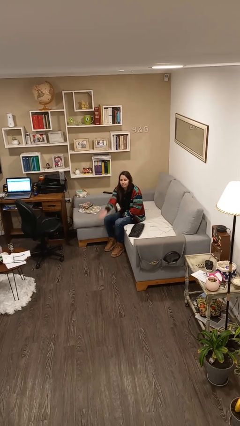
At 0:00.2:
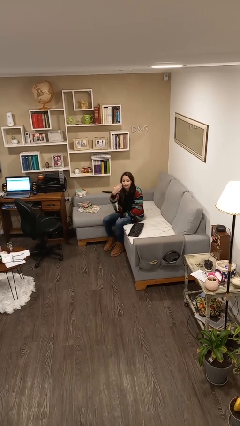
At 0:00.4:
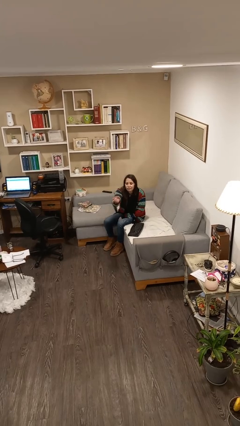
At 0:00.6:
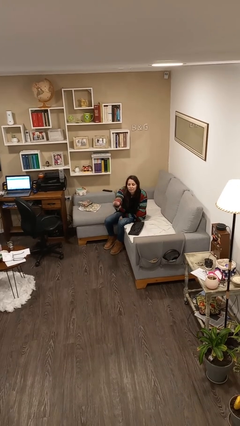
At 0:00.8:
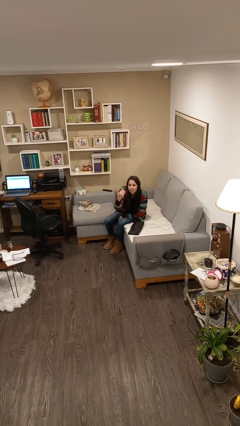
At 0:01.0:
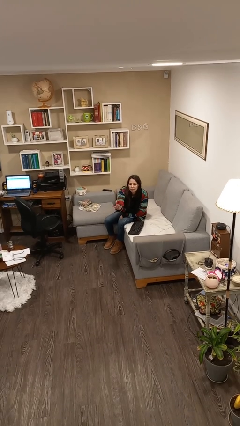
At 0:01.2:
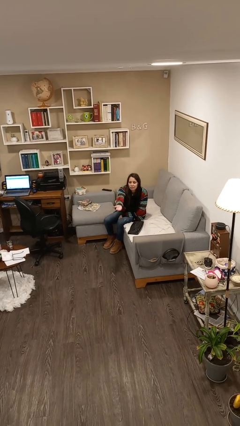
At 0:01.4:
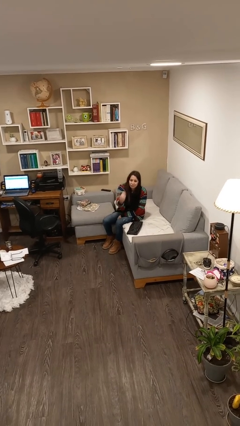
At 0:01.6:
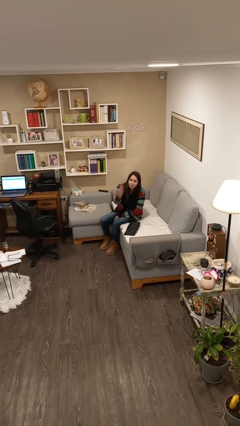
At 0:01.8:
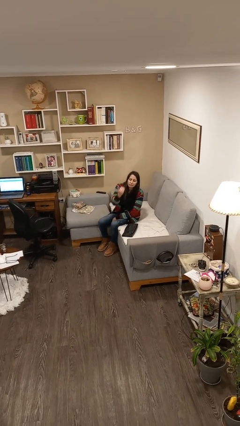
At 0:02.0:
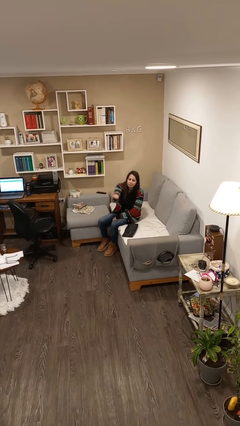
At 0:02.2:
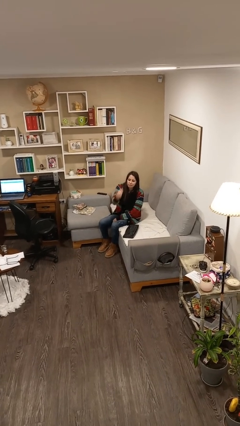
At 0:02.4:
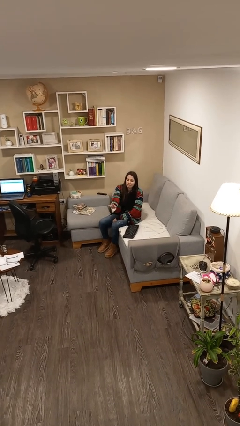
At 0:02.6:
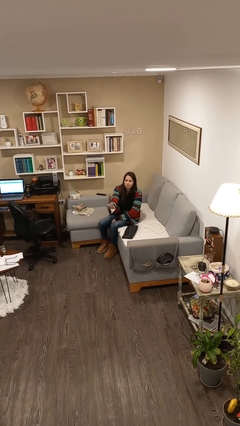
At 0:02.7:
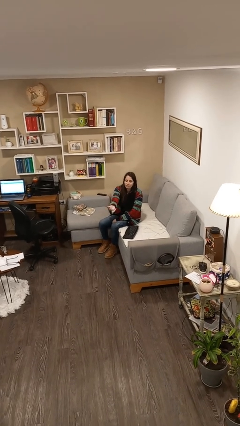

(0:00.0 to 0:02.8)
person gestures come here

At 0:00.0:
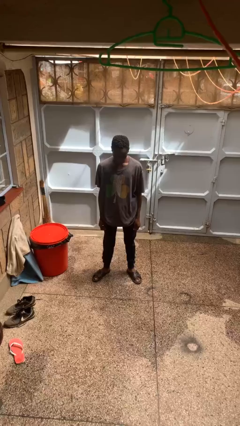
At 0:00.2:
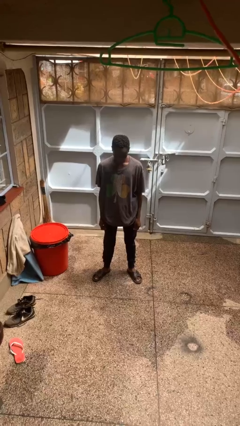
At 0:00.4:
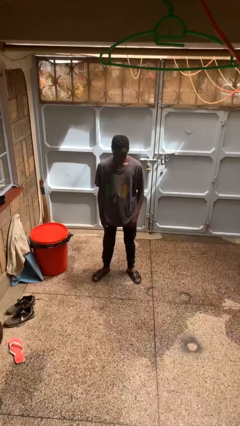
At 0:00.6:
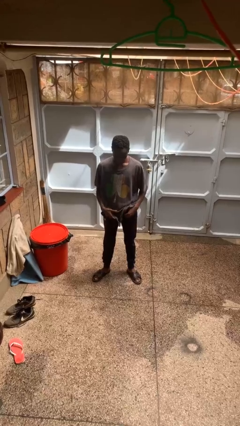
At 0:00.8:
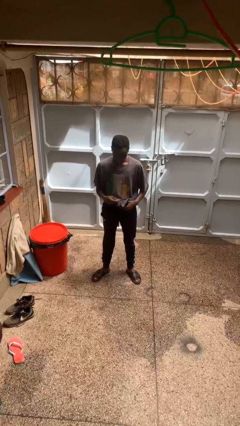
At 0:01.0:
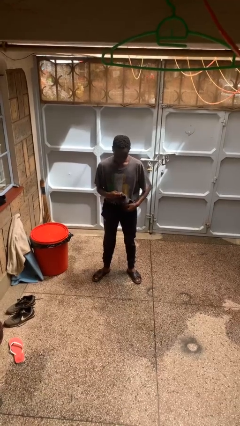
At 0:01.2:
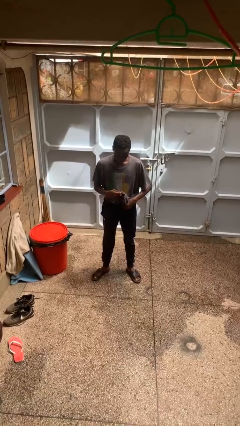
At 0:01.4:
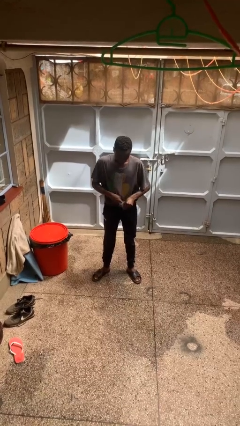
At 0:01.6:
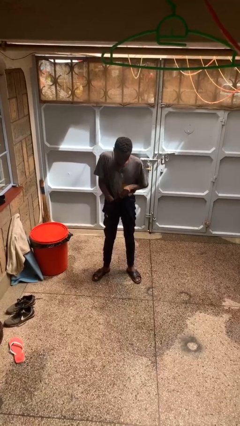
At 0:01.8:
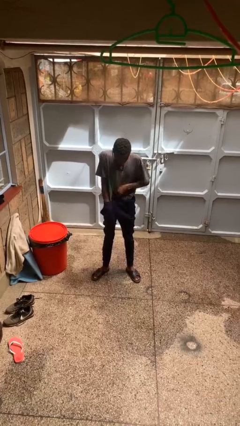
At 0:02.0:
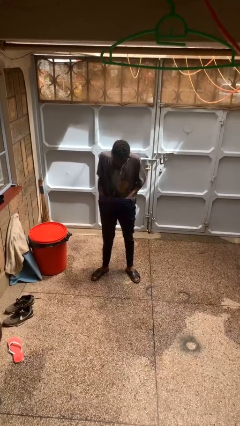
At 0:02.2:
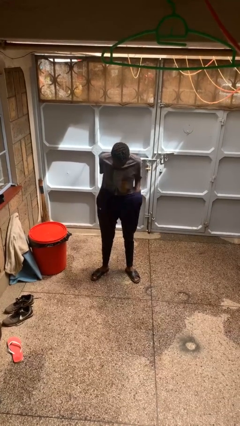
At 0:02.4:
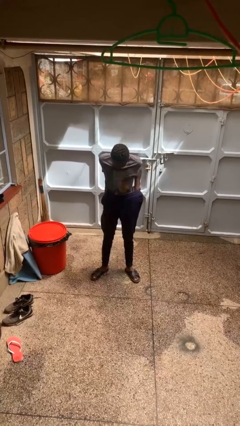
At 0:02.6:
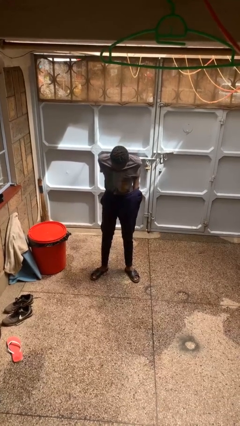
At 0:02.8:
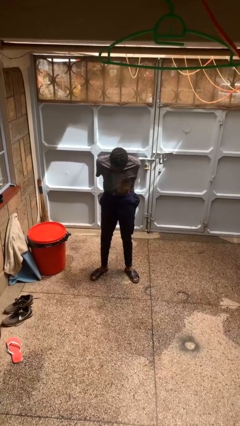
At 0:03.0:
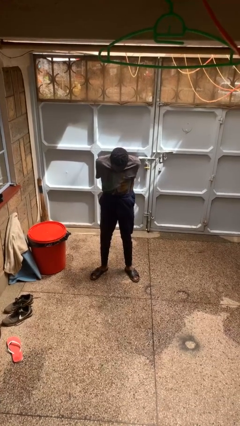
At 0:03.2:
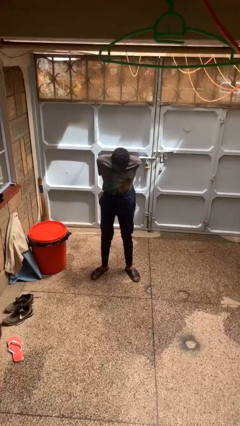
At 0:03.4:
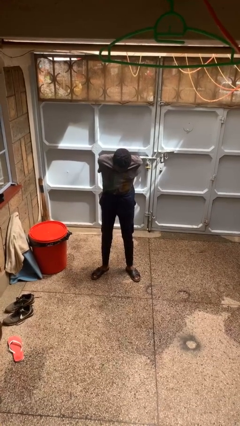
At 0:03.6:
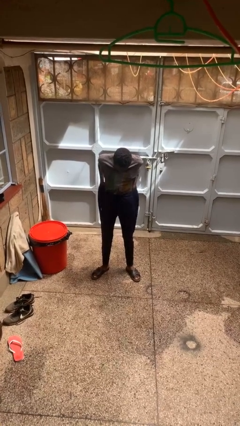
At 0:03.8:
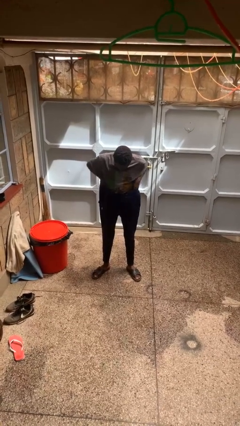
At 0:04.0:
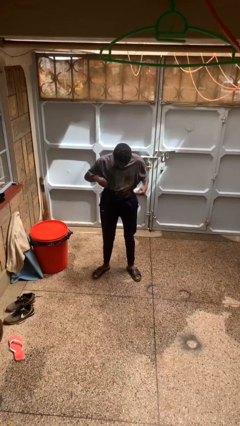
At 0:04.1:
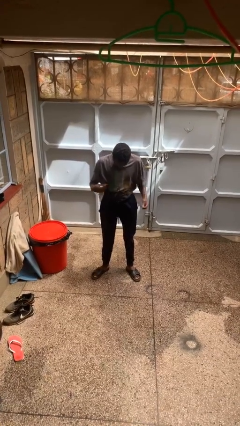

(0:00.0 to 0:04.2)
person tucks in shirt

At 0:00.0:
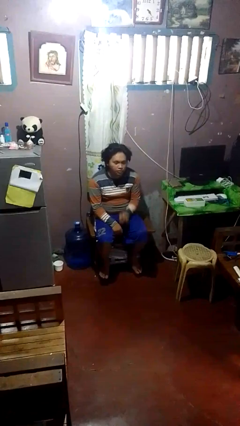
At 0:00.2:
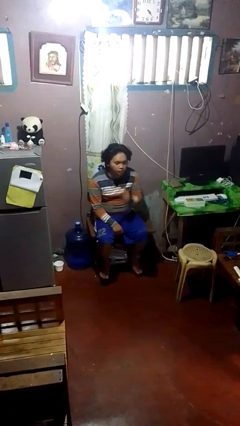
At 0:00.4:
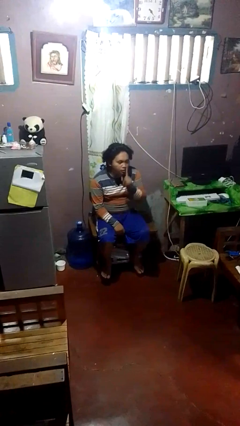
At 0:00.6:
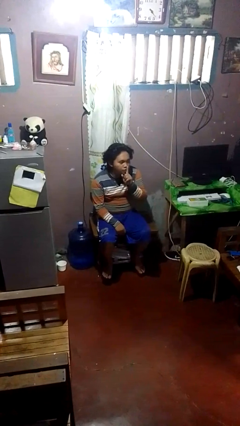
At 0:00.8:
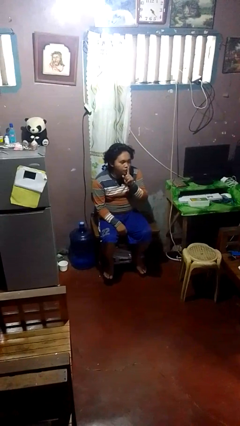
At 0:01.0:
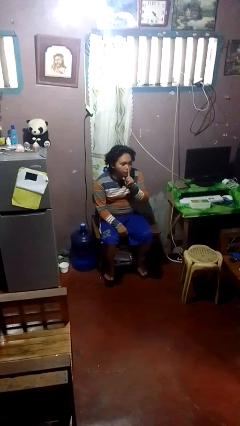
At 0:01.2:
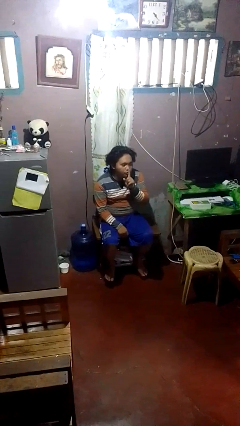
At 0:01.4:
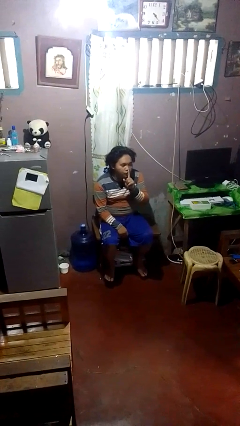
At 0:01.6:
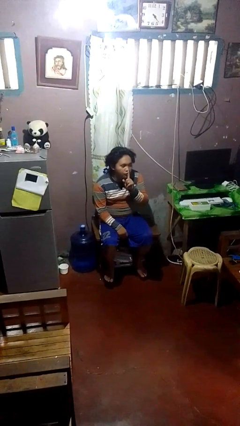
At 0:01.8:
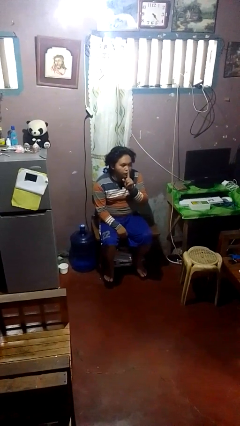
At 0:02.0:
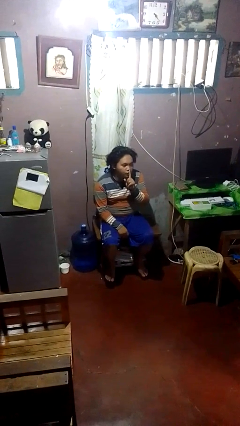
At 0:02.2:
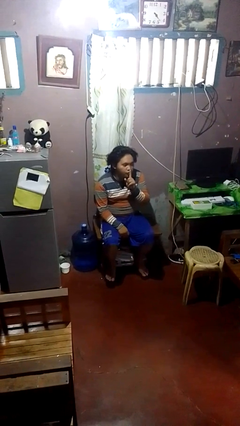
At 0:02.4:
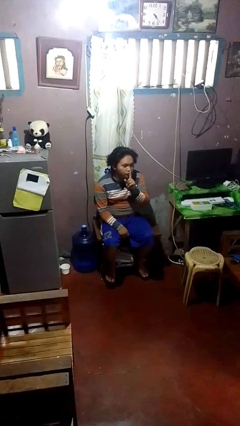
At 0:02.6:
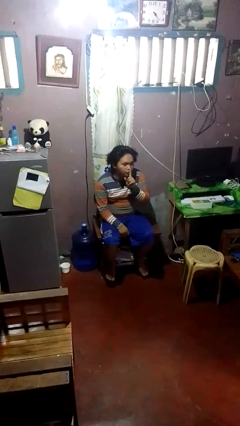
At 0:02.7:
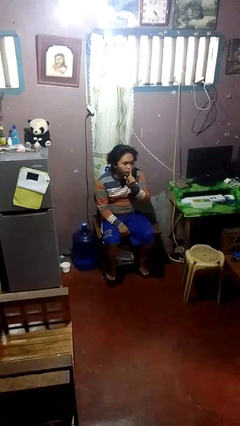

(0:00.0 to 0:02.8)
person gestures be quiet

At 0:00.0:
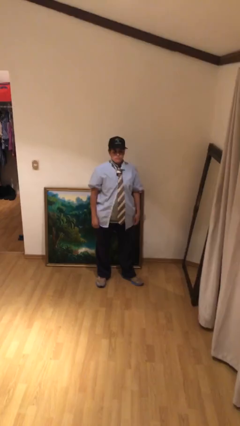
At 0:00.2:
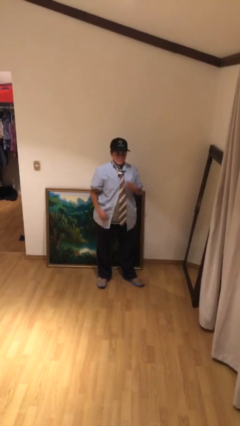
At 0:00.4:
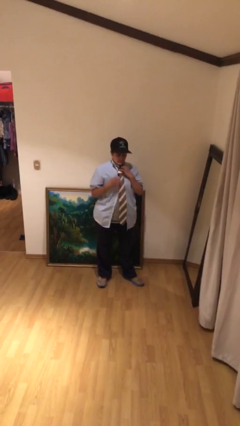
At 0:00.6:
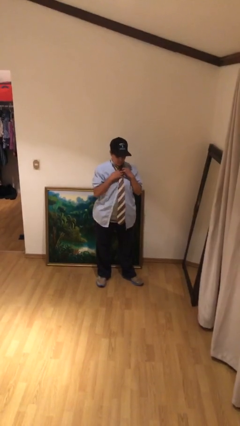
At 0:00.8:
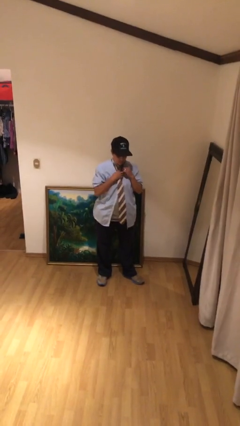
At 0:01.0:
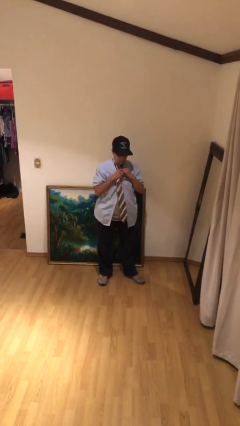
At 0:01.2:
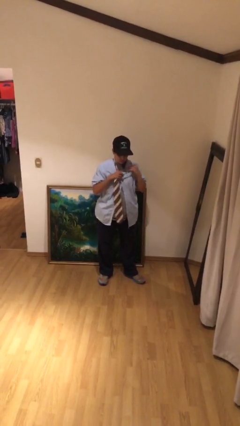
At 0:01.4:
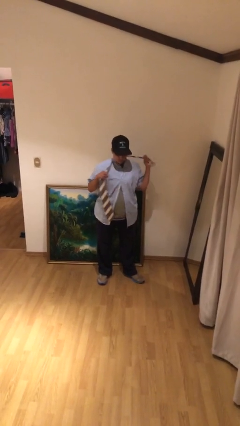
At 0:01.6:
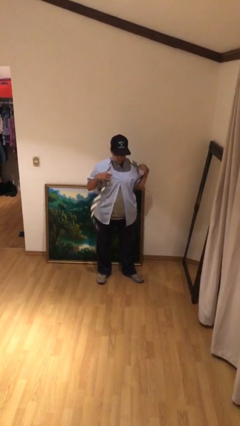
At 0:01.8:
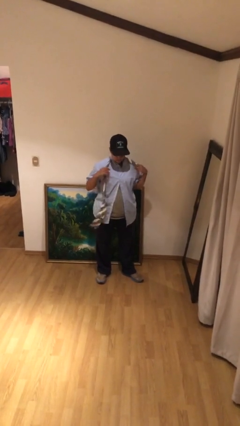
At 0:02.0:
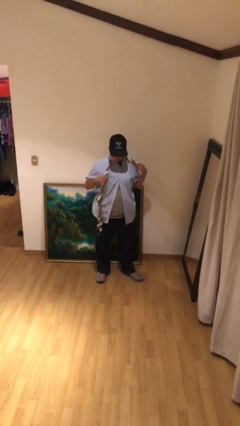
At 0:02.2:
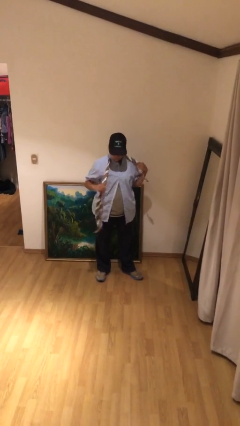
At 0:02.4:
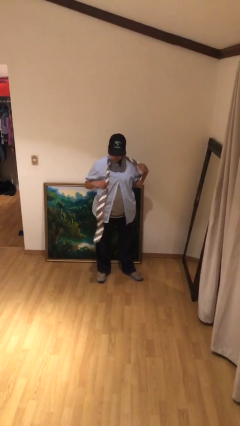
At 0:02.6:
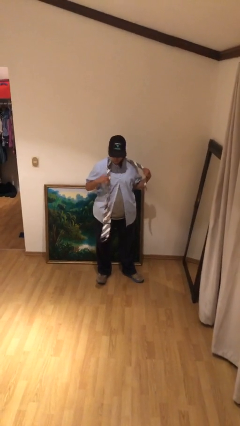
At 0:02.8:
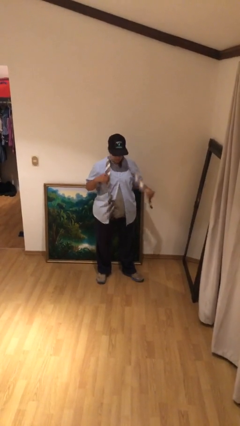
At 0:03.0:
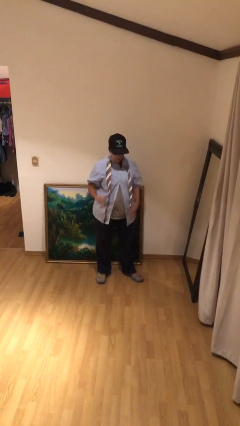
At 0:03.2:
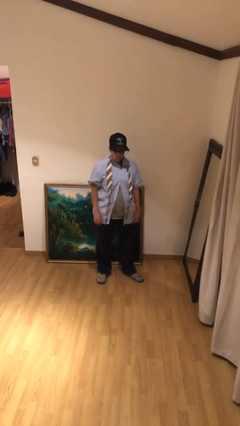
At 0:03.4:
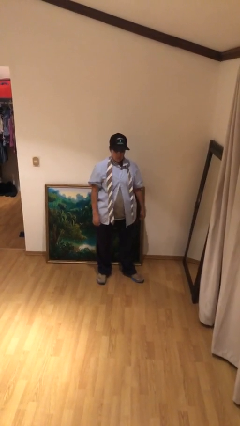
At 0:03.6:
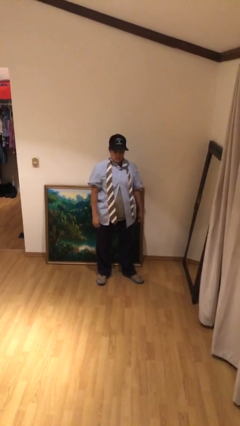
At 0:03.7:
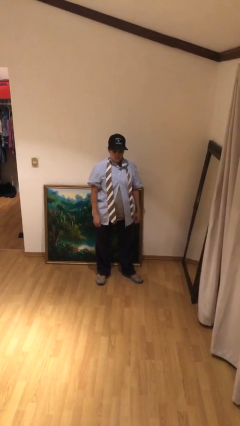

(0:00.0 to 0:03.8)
person takes off necktie

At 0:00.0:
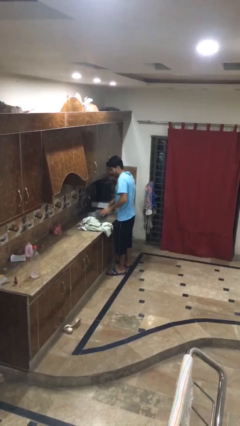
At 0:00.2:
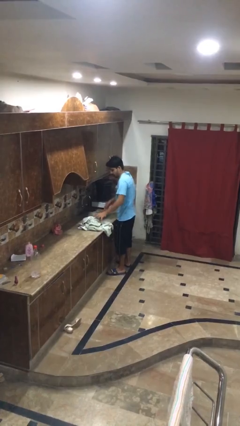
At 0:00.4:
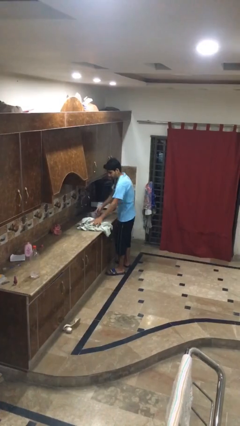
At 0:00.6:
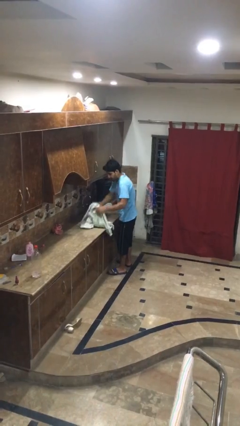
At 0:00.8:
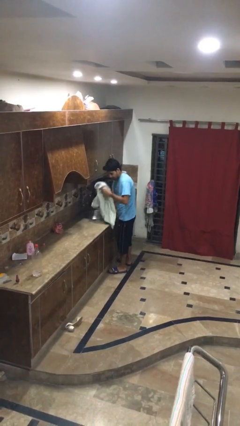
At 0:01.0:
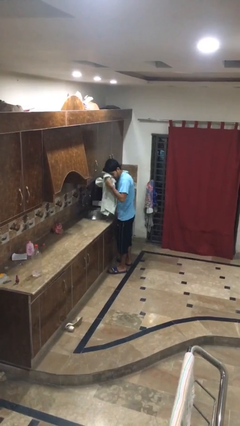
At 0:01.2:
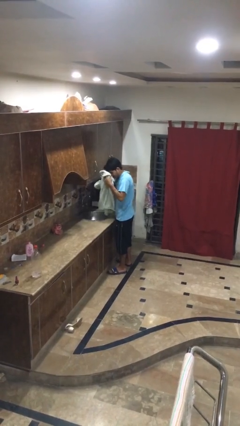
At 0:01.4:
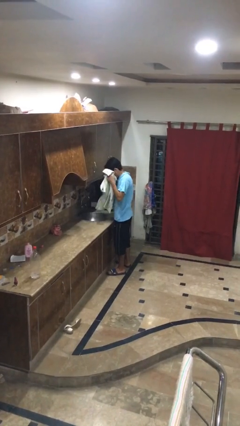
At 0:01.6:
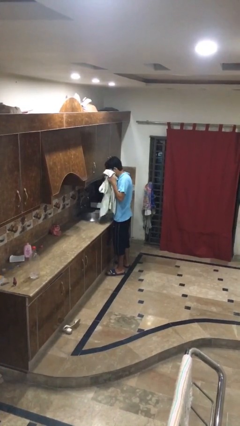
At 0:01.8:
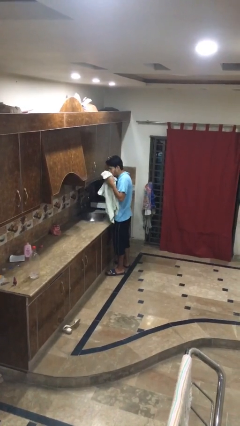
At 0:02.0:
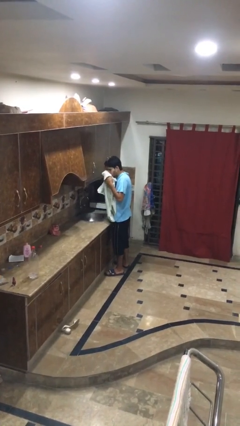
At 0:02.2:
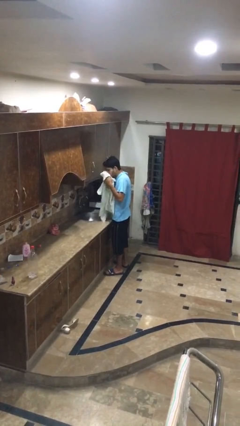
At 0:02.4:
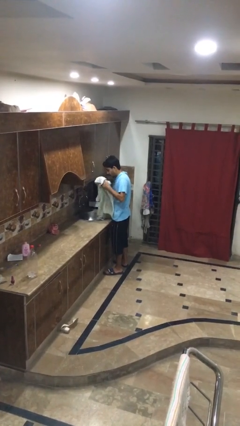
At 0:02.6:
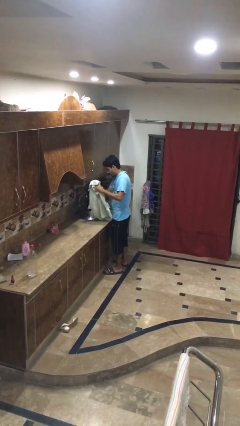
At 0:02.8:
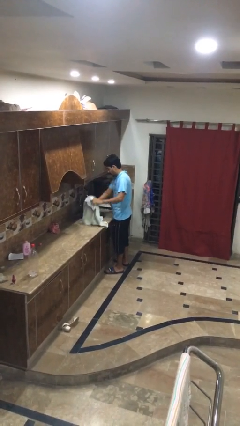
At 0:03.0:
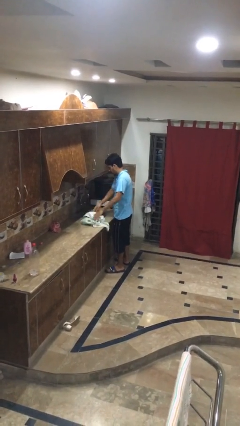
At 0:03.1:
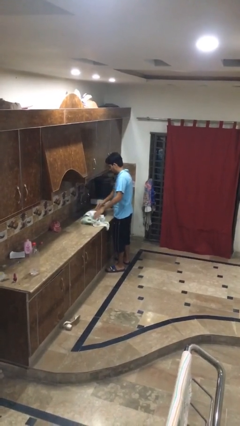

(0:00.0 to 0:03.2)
person dries face with towel

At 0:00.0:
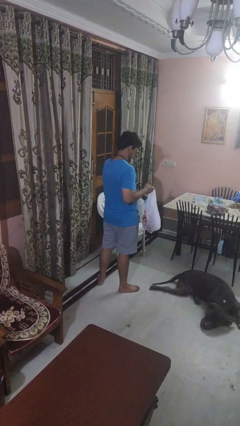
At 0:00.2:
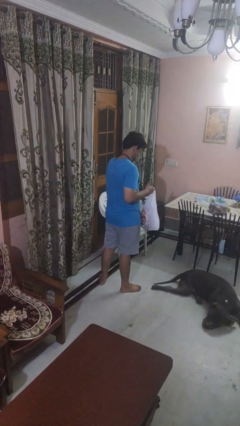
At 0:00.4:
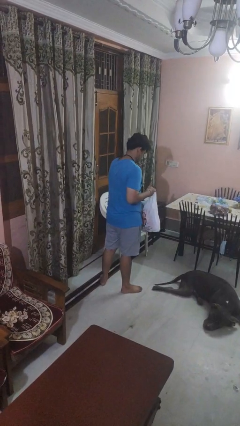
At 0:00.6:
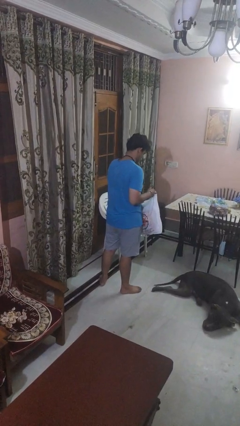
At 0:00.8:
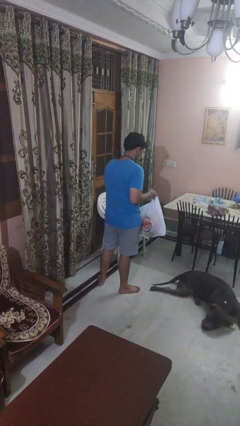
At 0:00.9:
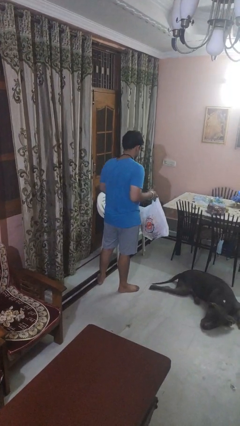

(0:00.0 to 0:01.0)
person puts object into bag
